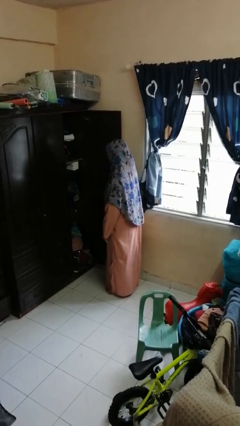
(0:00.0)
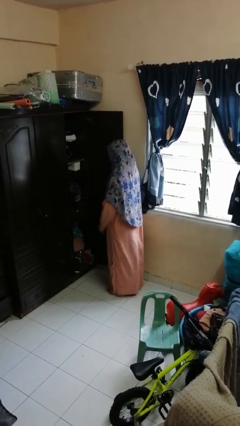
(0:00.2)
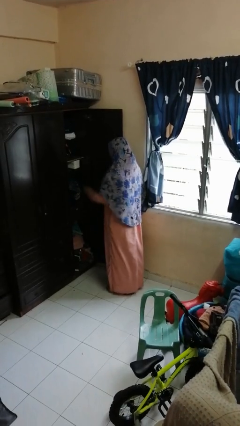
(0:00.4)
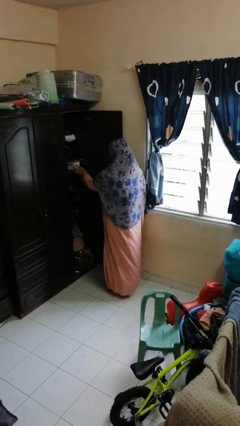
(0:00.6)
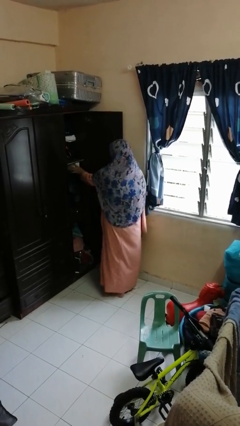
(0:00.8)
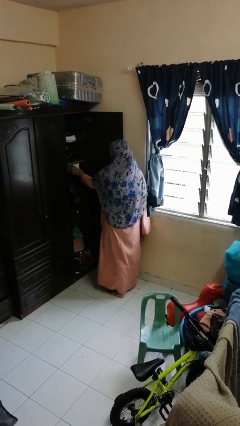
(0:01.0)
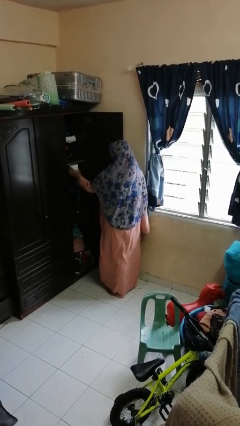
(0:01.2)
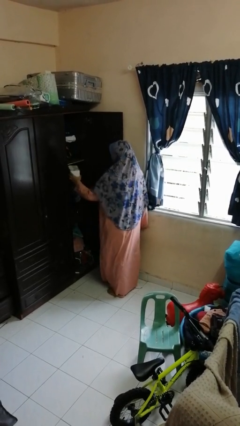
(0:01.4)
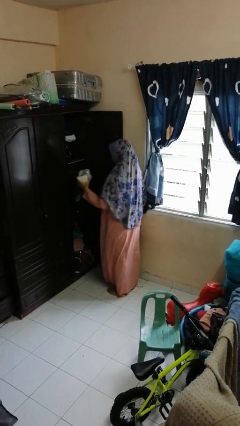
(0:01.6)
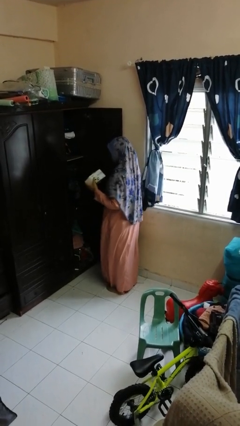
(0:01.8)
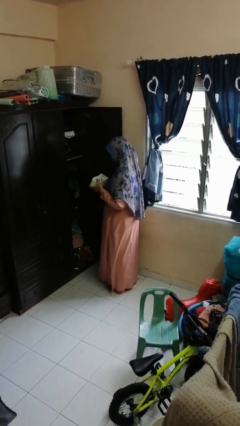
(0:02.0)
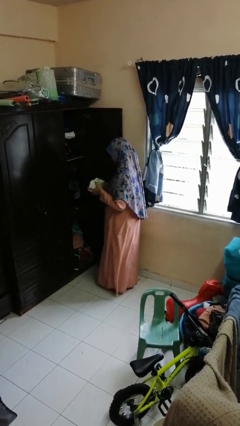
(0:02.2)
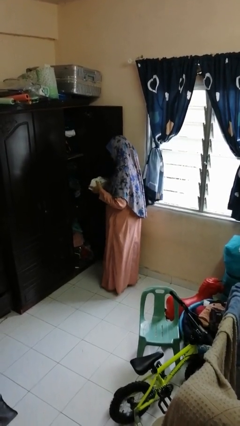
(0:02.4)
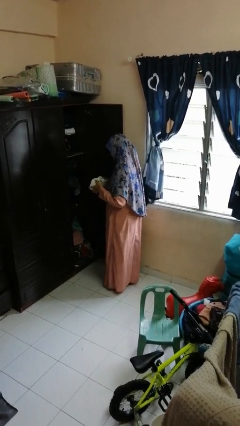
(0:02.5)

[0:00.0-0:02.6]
person picks up object from cabinet

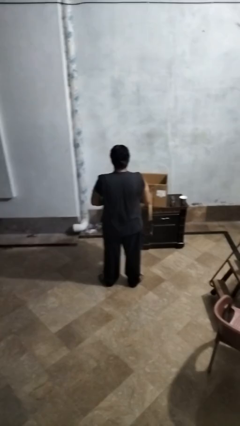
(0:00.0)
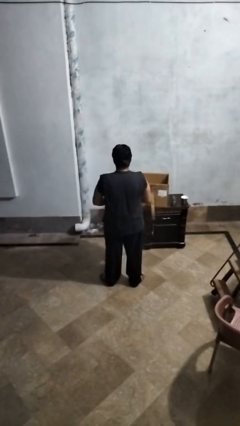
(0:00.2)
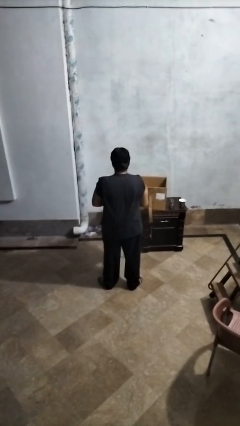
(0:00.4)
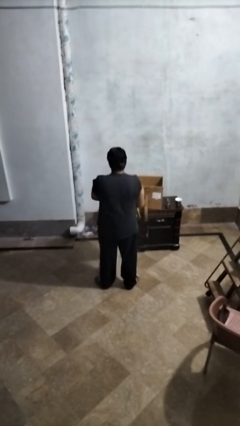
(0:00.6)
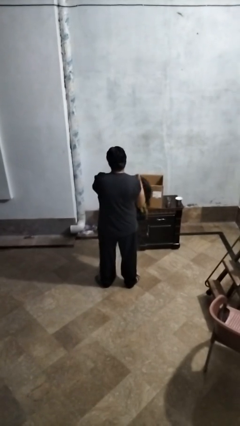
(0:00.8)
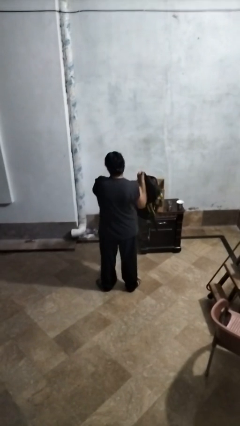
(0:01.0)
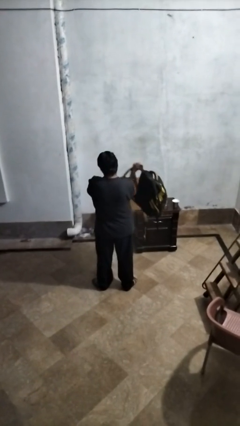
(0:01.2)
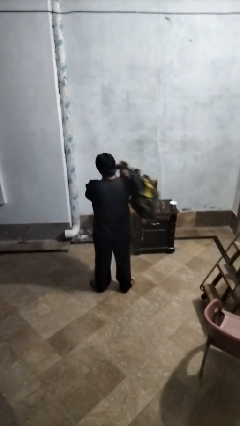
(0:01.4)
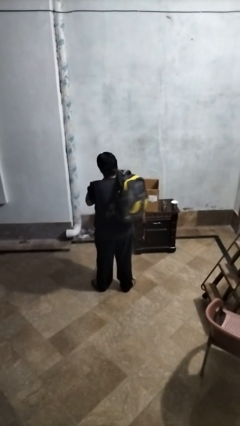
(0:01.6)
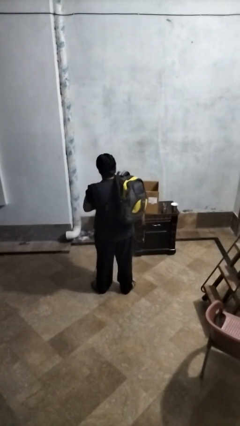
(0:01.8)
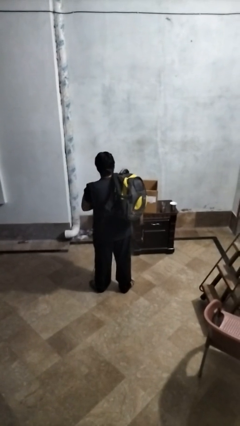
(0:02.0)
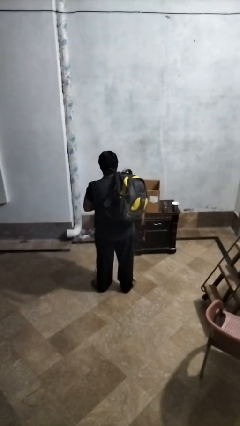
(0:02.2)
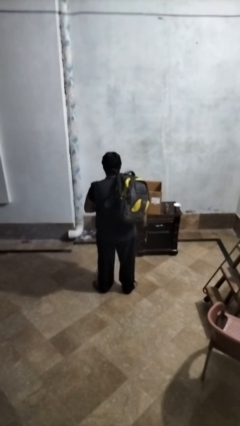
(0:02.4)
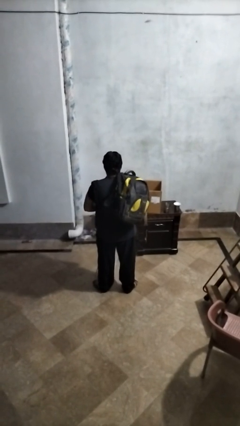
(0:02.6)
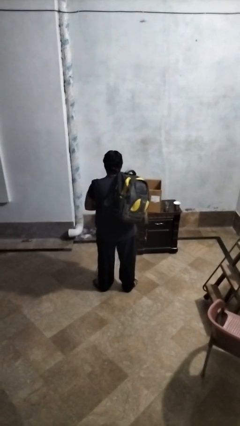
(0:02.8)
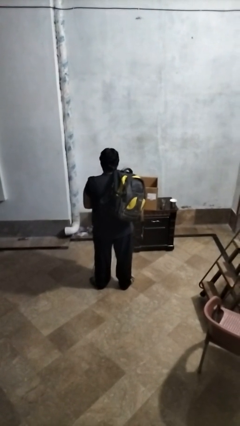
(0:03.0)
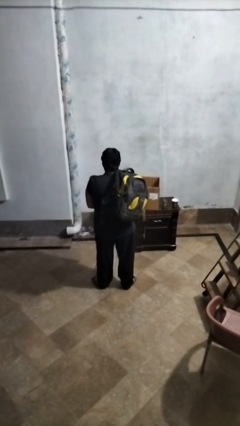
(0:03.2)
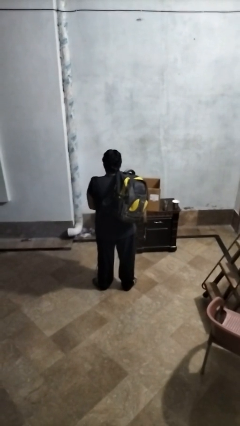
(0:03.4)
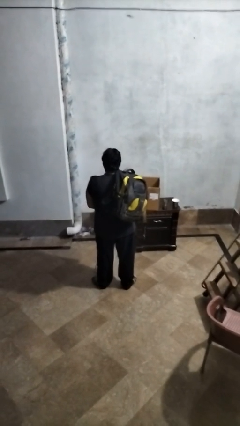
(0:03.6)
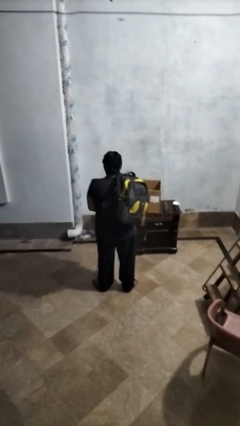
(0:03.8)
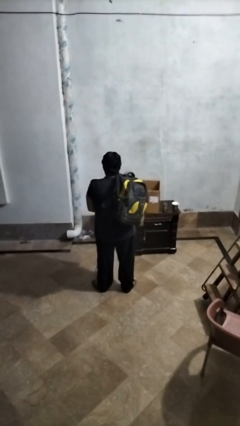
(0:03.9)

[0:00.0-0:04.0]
person puts on backpack

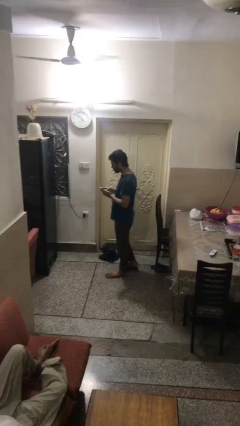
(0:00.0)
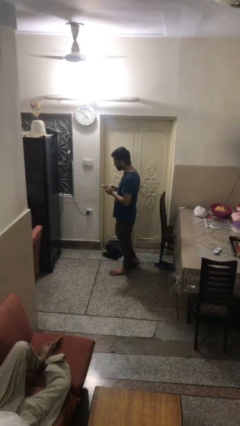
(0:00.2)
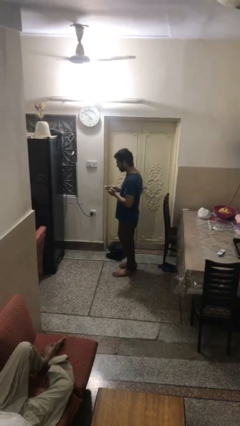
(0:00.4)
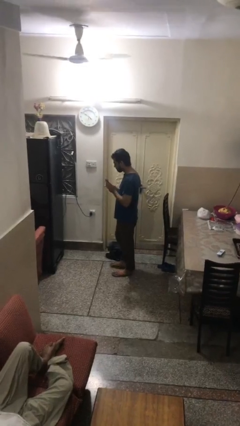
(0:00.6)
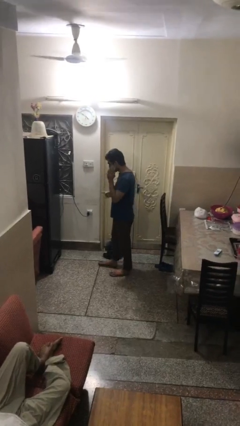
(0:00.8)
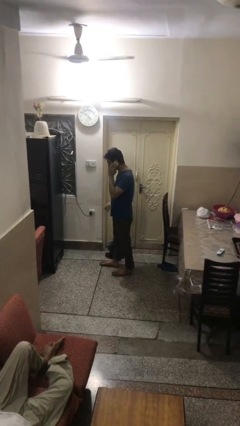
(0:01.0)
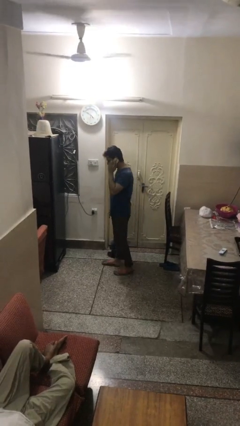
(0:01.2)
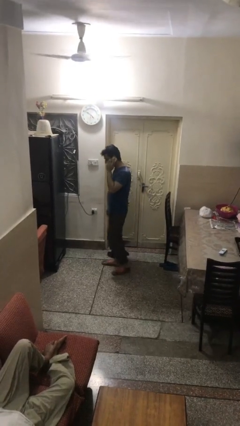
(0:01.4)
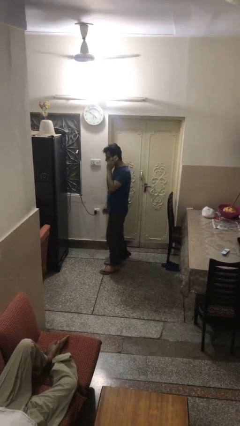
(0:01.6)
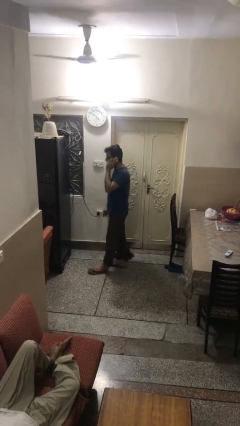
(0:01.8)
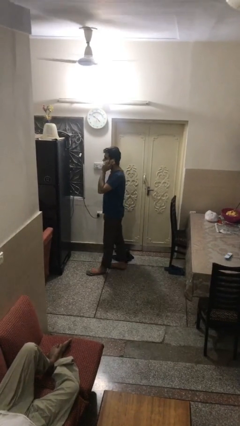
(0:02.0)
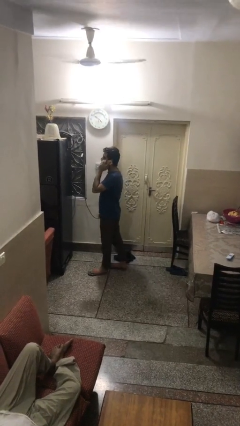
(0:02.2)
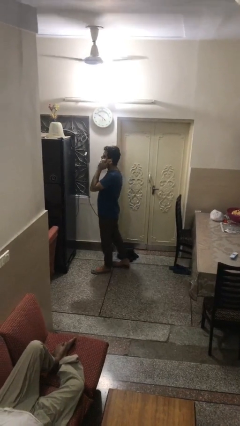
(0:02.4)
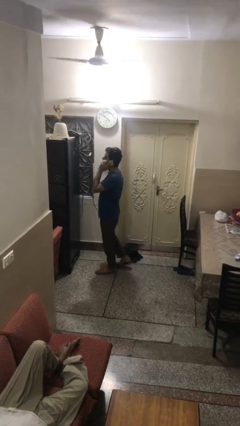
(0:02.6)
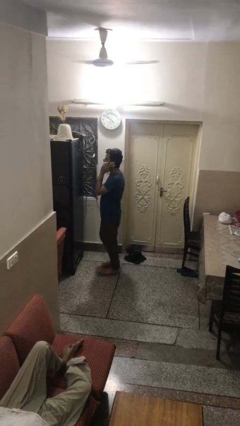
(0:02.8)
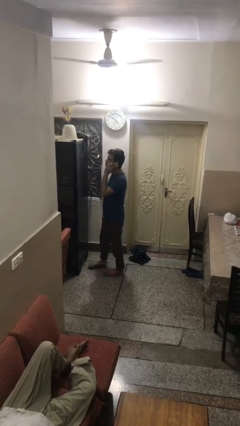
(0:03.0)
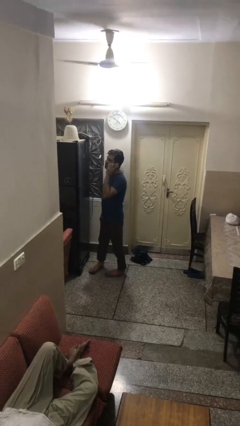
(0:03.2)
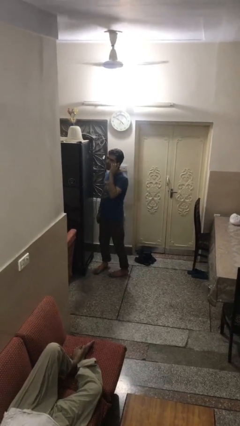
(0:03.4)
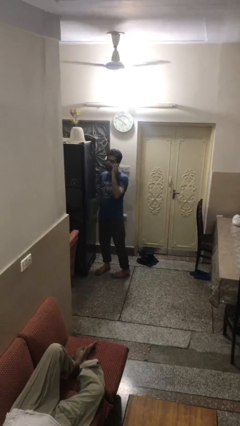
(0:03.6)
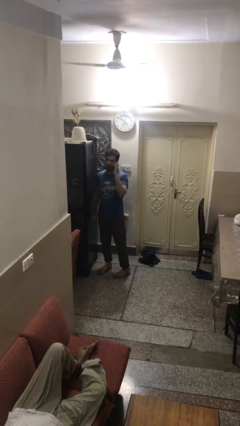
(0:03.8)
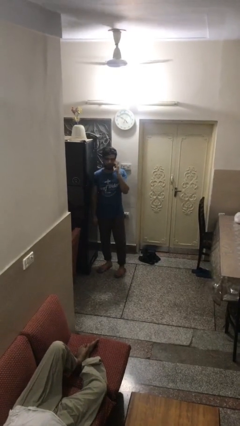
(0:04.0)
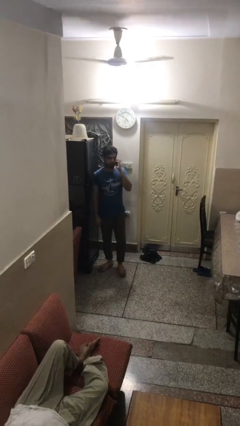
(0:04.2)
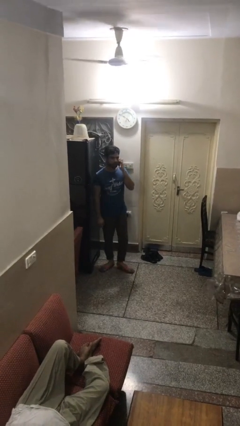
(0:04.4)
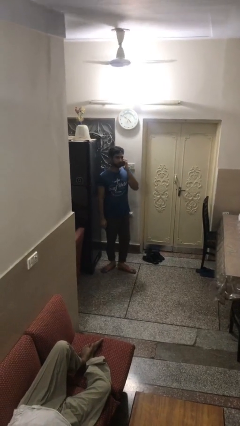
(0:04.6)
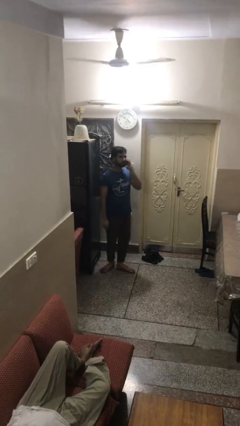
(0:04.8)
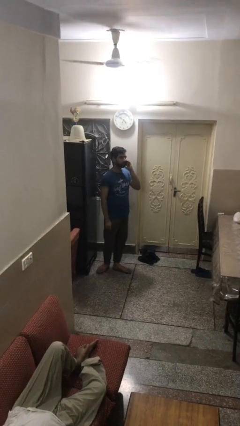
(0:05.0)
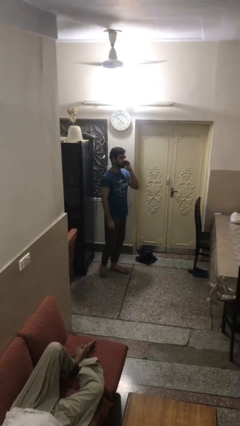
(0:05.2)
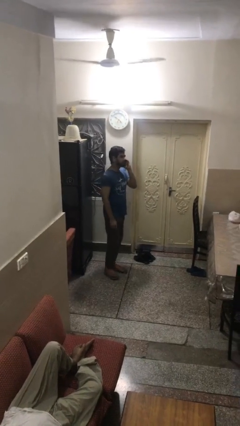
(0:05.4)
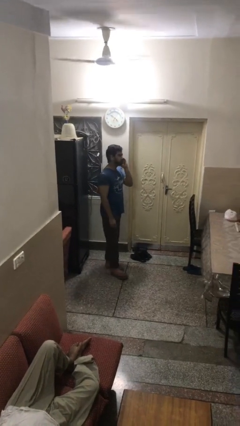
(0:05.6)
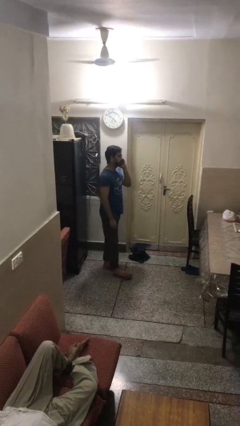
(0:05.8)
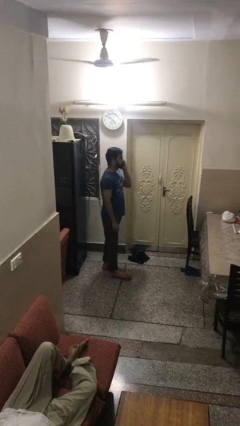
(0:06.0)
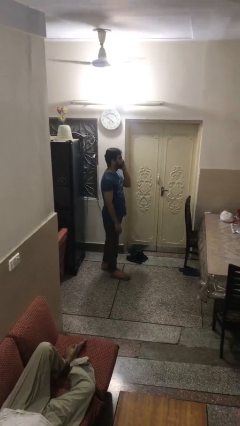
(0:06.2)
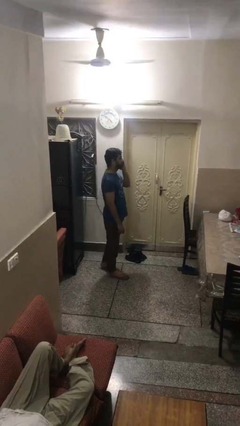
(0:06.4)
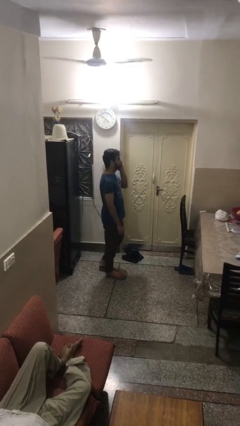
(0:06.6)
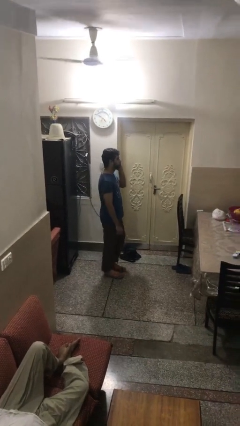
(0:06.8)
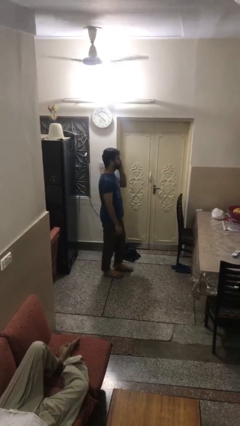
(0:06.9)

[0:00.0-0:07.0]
person talks on phone

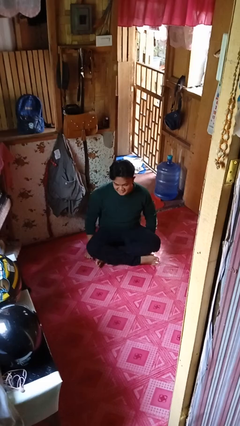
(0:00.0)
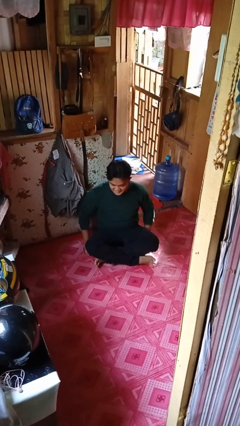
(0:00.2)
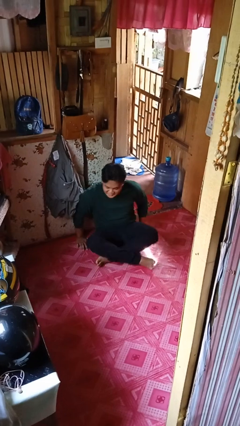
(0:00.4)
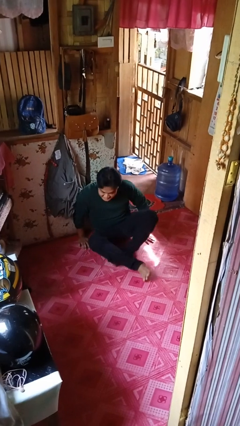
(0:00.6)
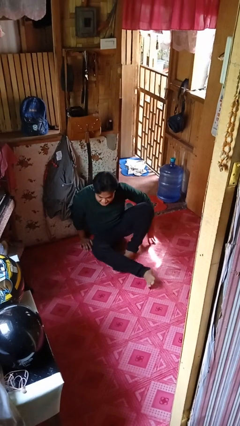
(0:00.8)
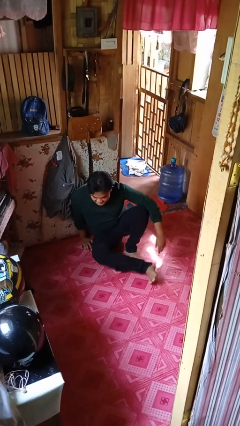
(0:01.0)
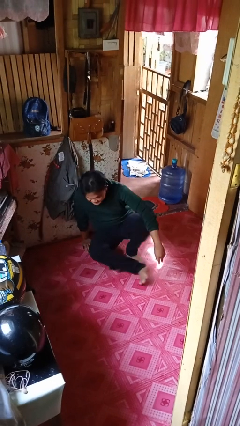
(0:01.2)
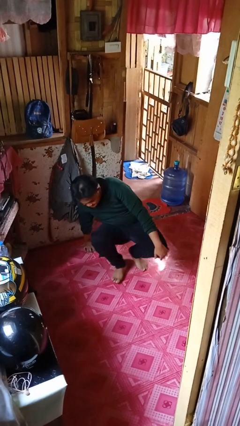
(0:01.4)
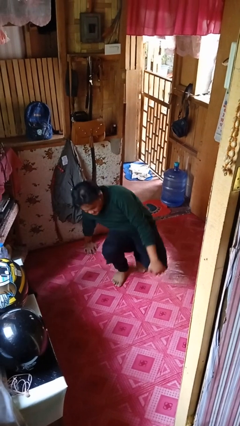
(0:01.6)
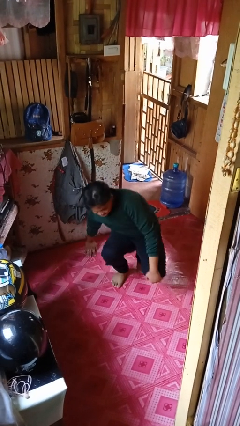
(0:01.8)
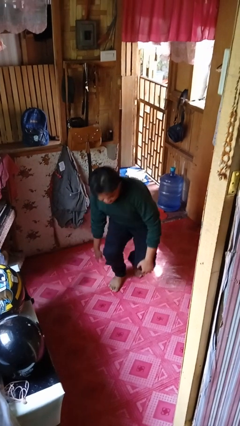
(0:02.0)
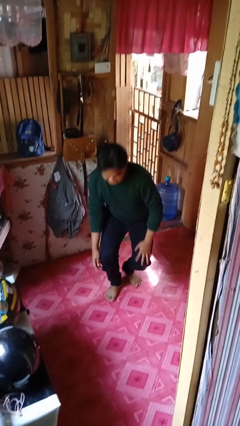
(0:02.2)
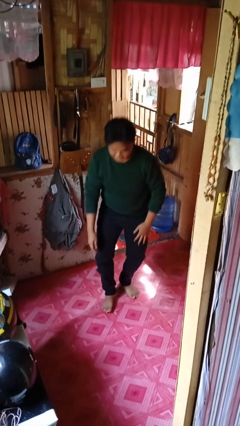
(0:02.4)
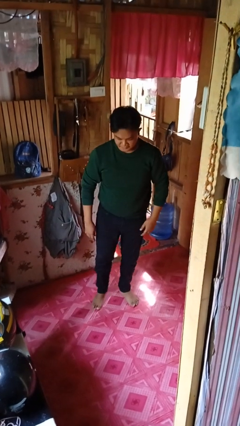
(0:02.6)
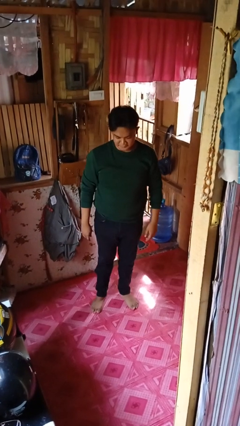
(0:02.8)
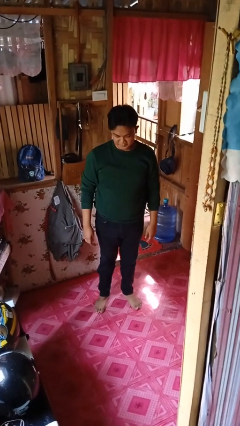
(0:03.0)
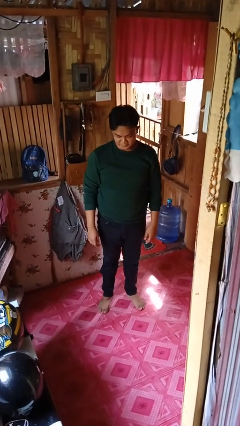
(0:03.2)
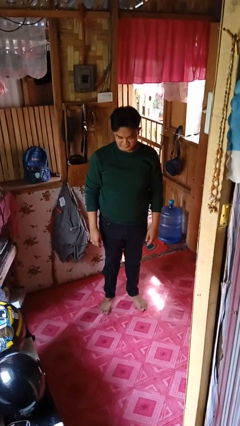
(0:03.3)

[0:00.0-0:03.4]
person stands up from floor

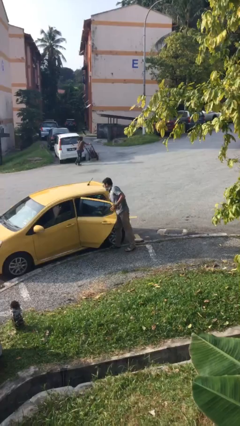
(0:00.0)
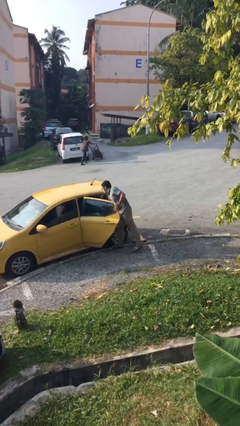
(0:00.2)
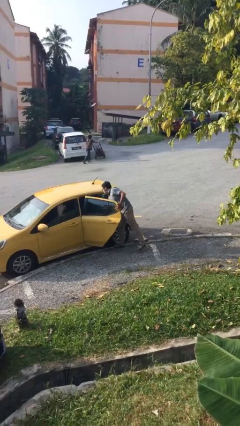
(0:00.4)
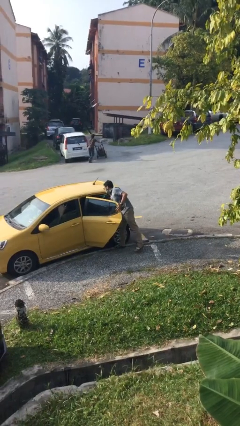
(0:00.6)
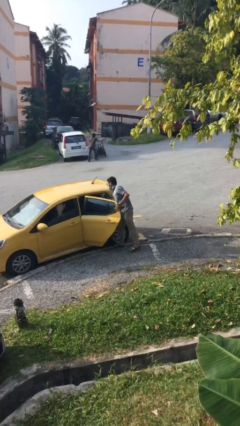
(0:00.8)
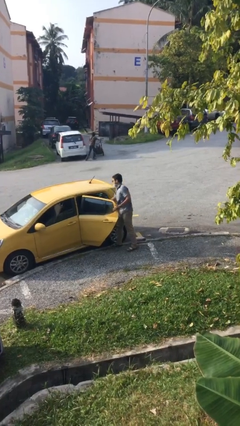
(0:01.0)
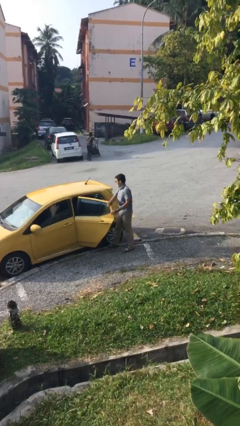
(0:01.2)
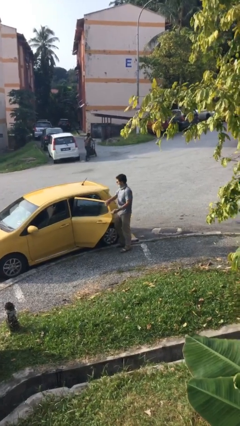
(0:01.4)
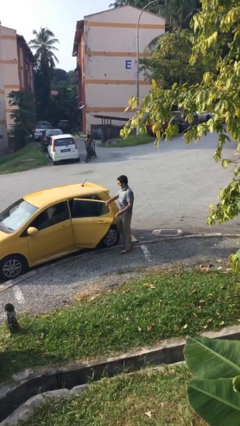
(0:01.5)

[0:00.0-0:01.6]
person loads car
